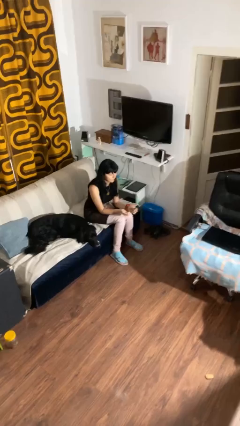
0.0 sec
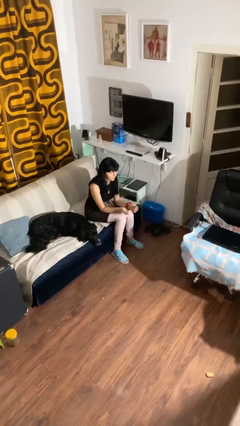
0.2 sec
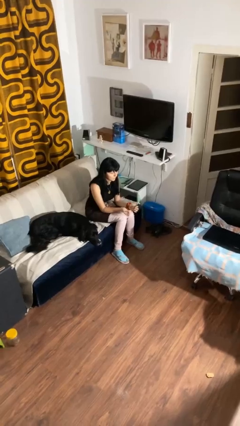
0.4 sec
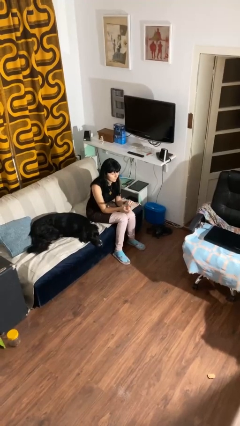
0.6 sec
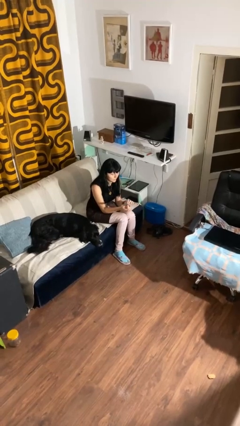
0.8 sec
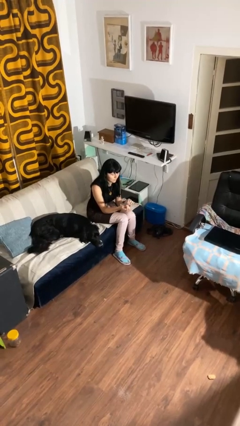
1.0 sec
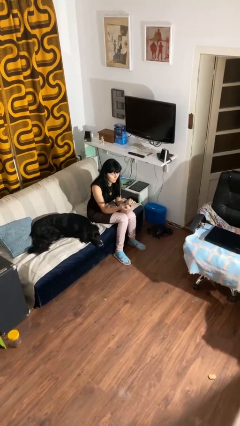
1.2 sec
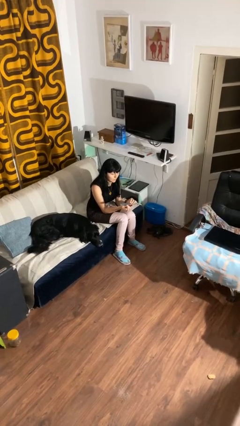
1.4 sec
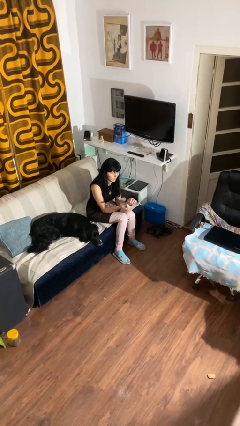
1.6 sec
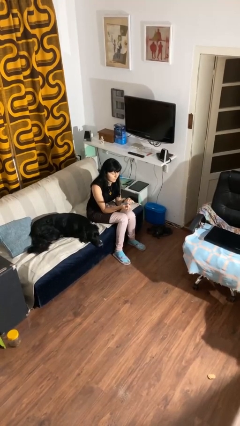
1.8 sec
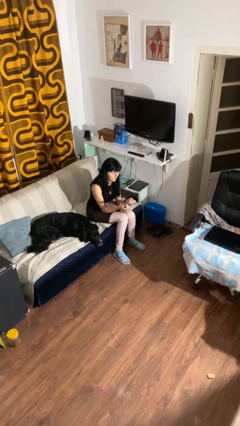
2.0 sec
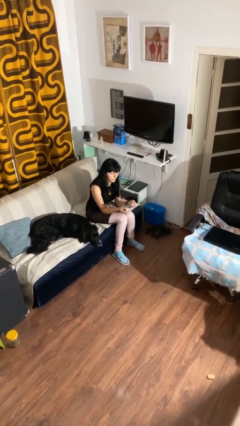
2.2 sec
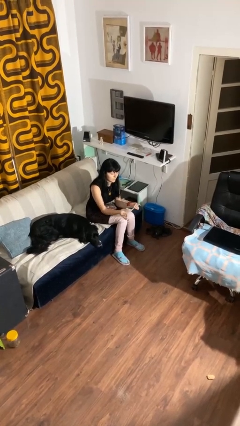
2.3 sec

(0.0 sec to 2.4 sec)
person files fingernails

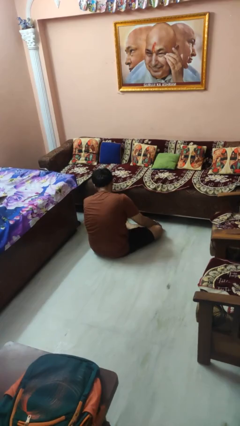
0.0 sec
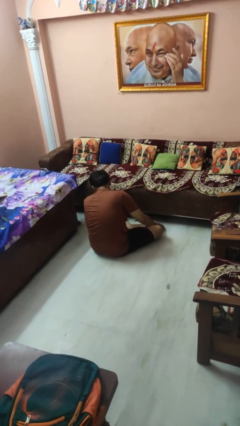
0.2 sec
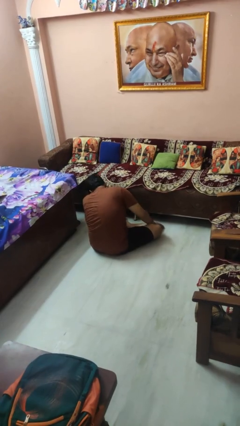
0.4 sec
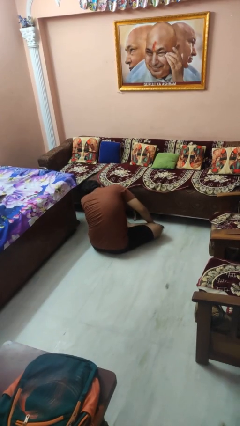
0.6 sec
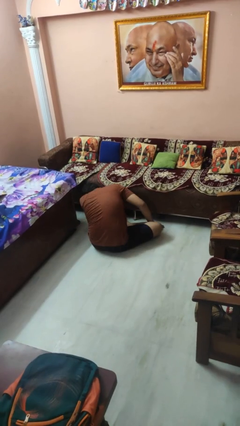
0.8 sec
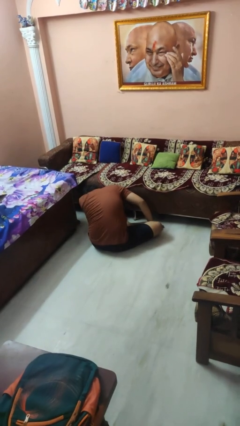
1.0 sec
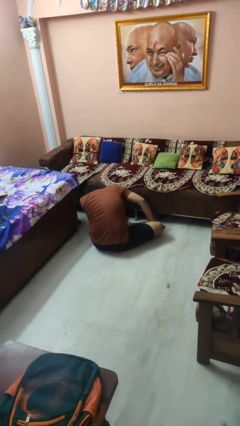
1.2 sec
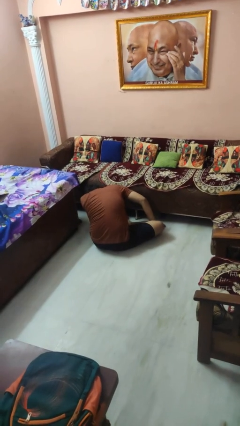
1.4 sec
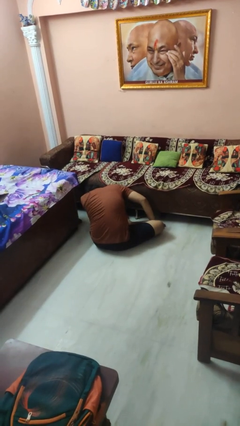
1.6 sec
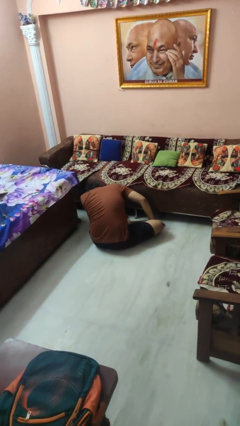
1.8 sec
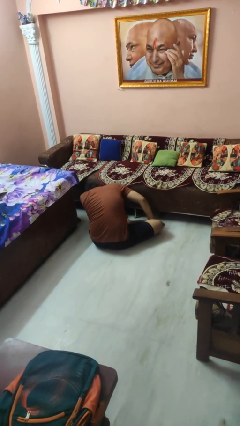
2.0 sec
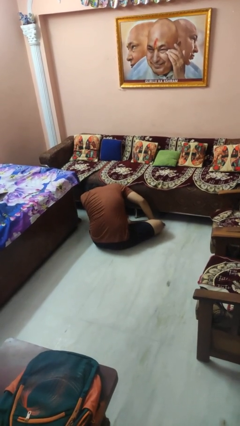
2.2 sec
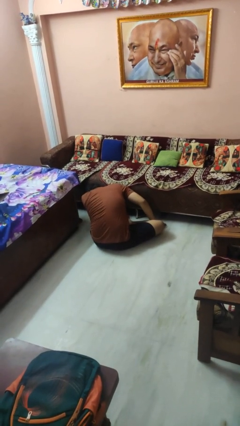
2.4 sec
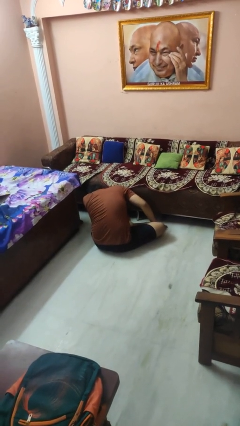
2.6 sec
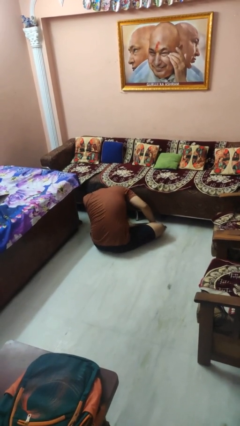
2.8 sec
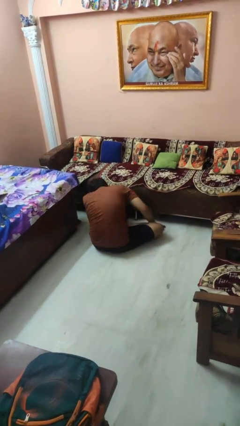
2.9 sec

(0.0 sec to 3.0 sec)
person searches under couch

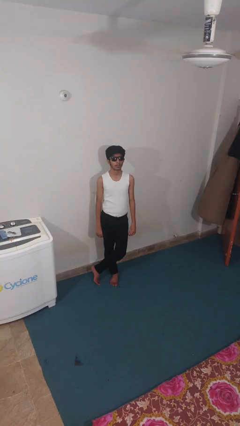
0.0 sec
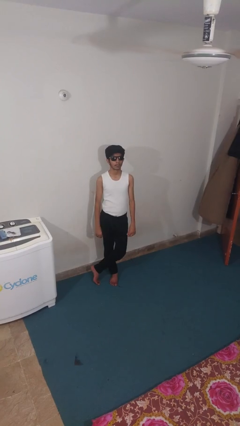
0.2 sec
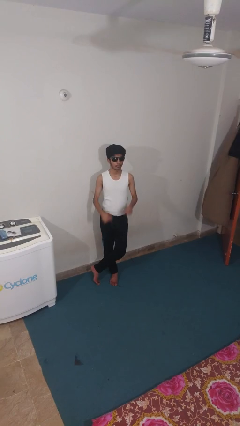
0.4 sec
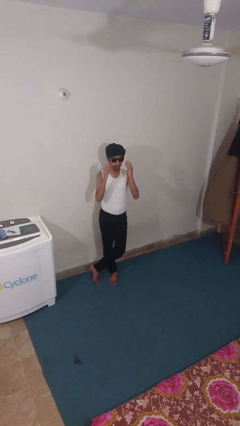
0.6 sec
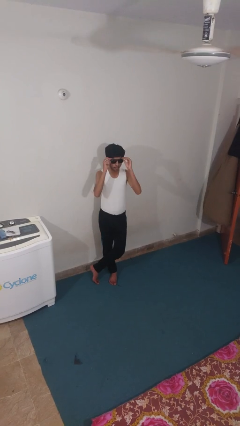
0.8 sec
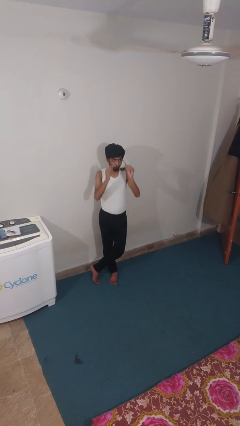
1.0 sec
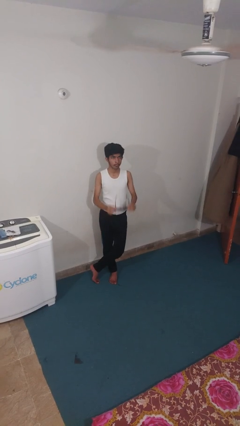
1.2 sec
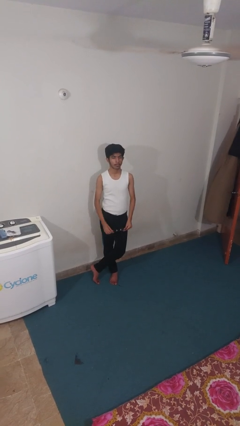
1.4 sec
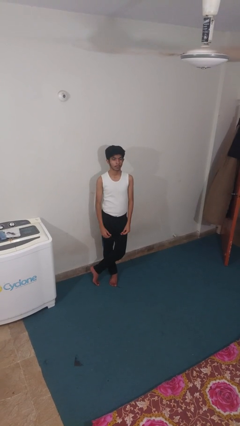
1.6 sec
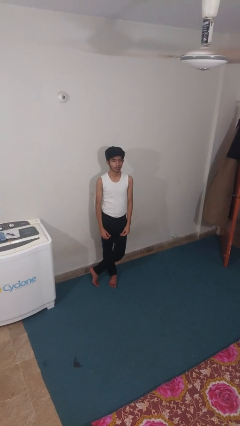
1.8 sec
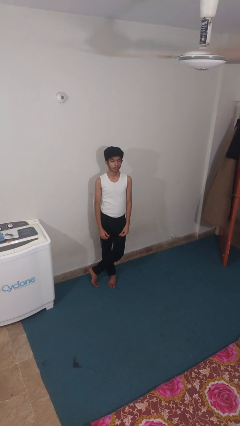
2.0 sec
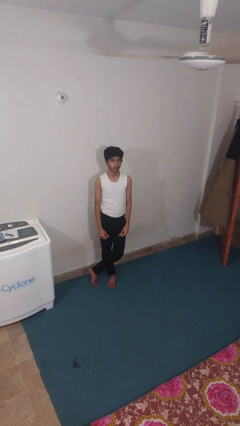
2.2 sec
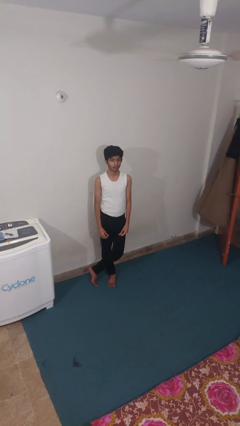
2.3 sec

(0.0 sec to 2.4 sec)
person takes off sunglasses

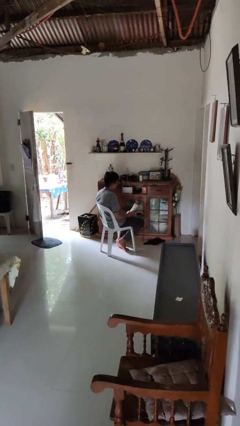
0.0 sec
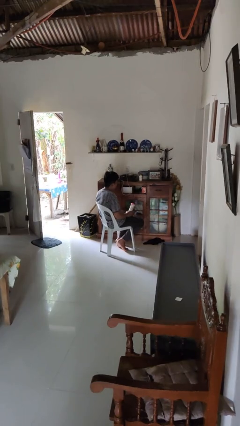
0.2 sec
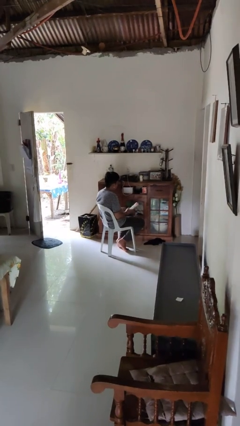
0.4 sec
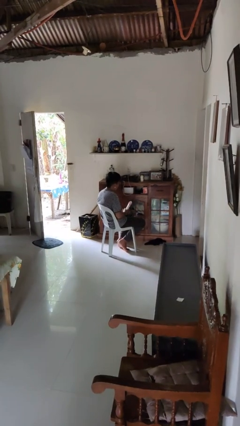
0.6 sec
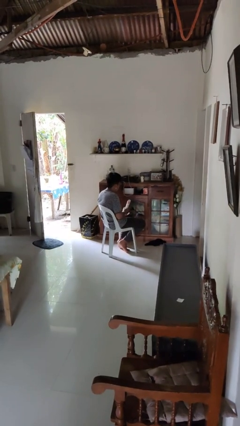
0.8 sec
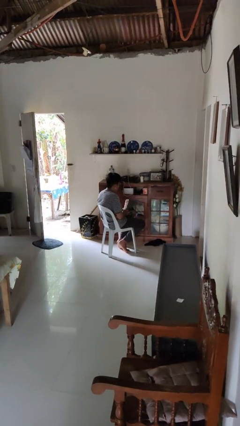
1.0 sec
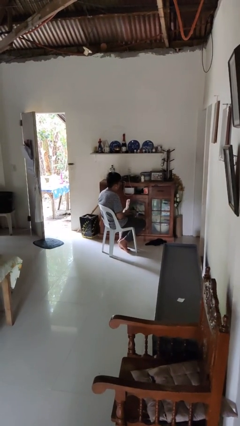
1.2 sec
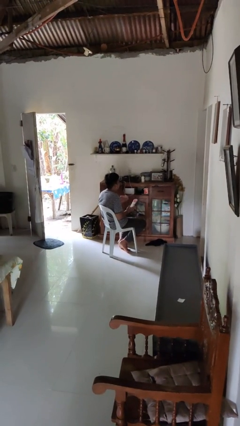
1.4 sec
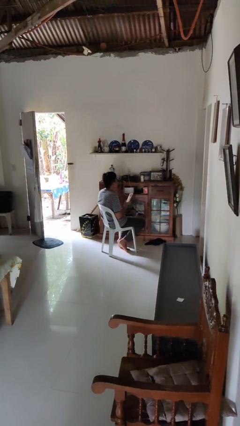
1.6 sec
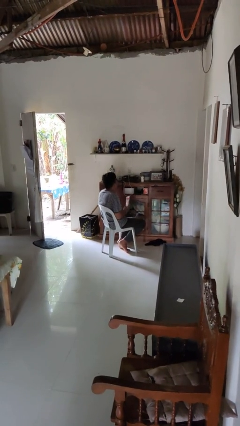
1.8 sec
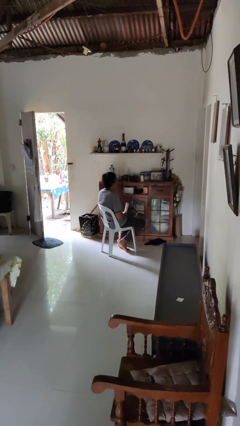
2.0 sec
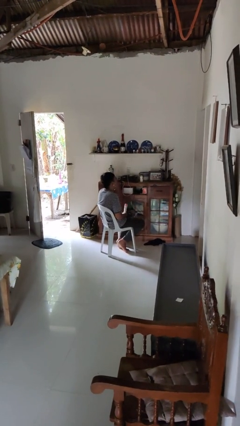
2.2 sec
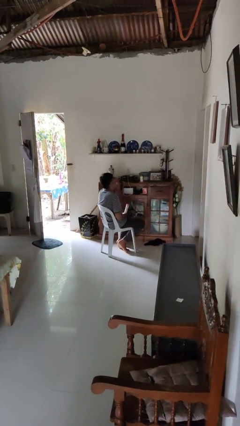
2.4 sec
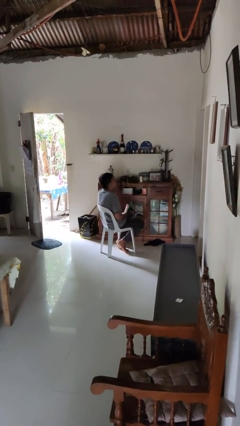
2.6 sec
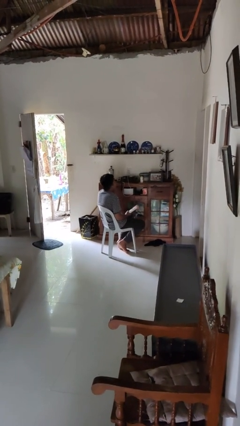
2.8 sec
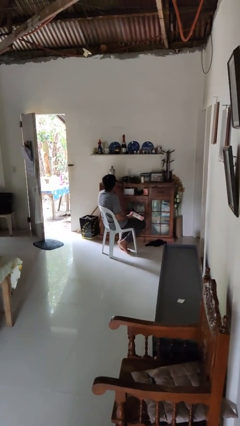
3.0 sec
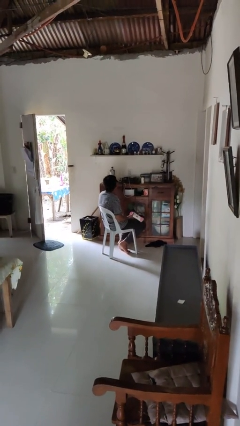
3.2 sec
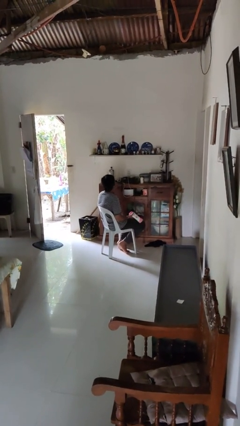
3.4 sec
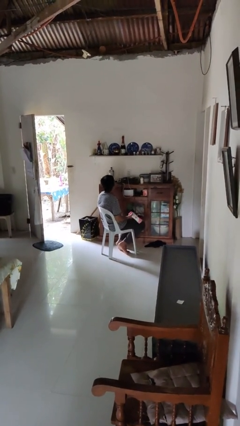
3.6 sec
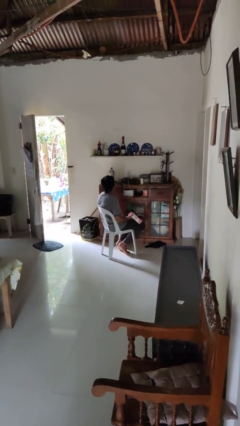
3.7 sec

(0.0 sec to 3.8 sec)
person applies sunscreen

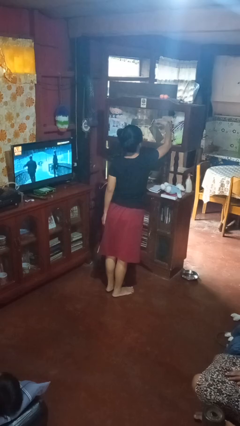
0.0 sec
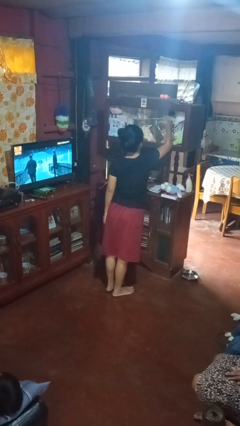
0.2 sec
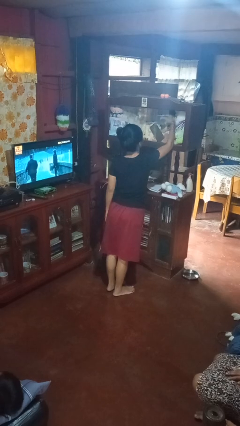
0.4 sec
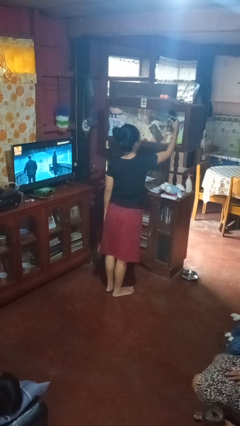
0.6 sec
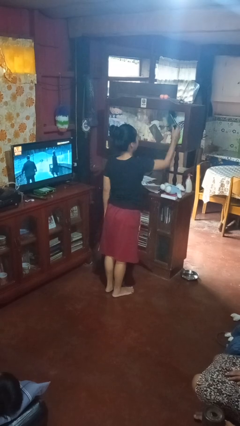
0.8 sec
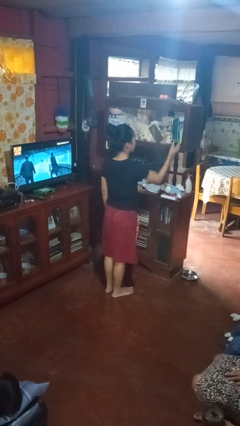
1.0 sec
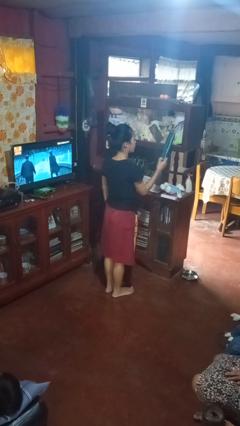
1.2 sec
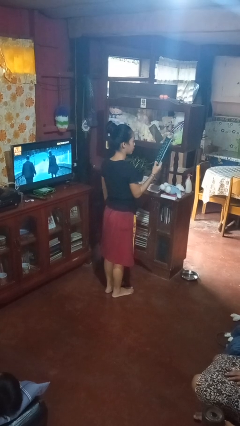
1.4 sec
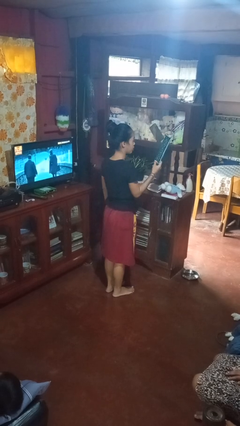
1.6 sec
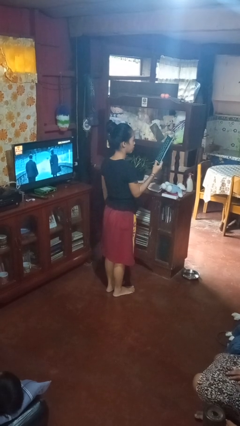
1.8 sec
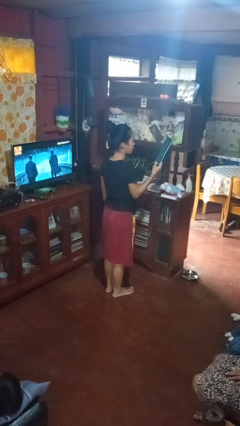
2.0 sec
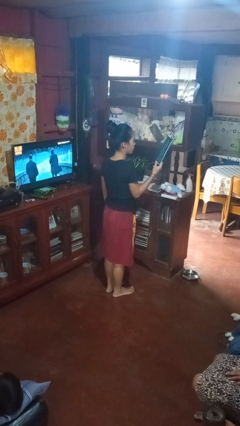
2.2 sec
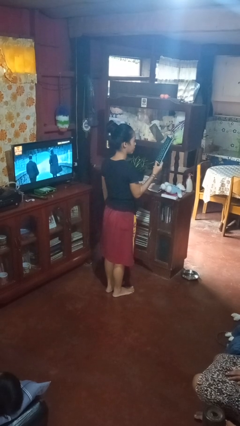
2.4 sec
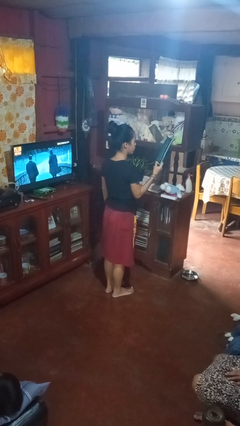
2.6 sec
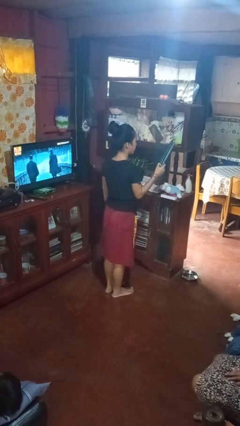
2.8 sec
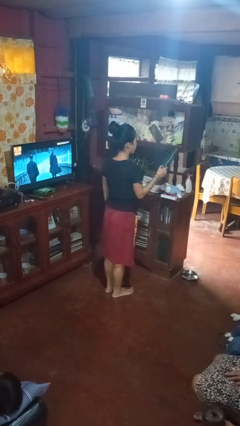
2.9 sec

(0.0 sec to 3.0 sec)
person picks up object from shelf

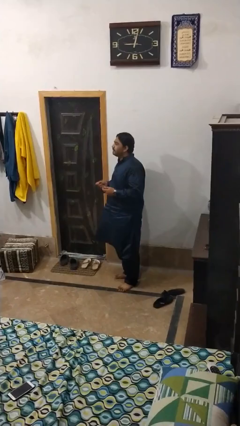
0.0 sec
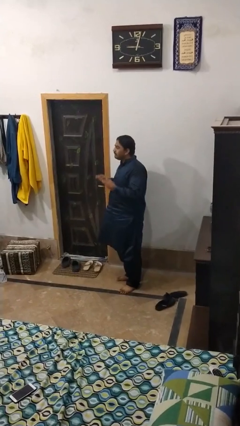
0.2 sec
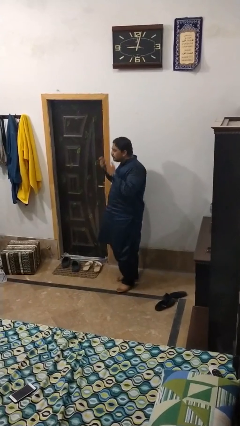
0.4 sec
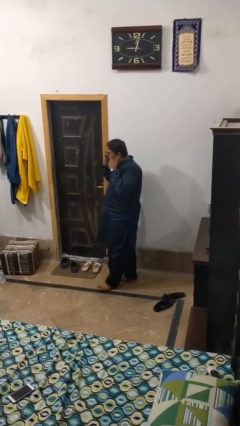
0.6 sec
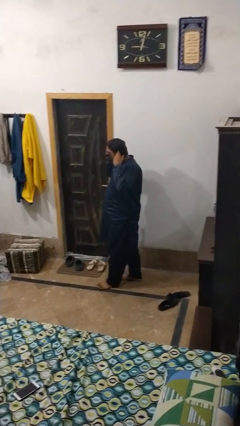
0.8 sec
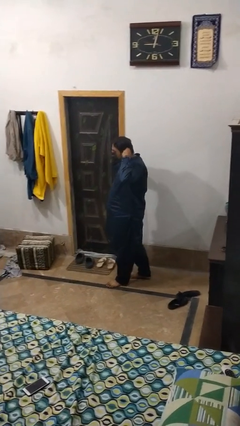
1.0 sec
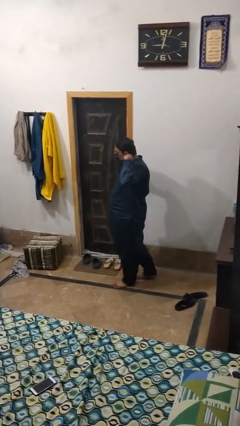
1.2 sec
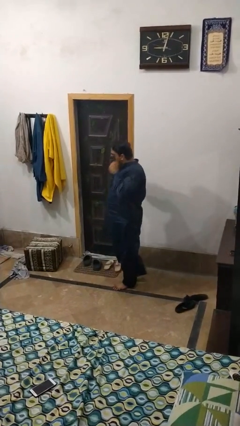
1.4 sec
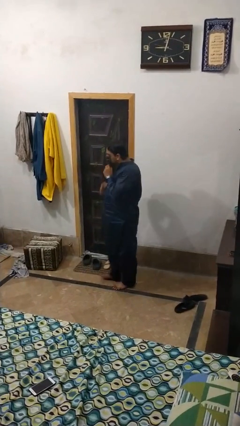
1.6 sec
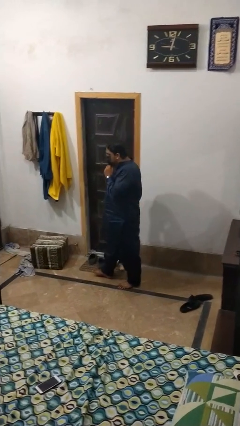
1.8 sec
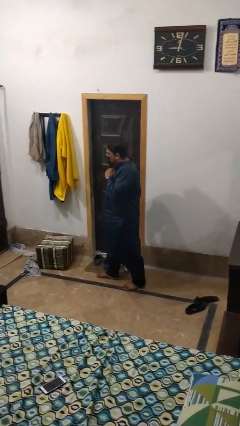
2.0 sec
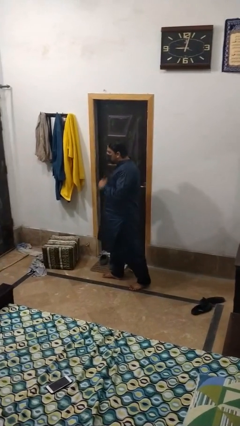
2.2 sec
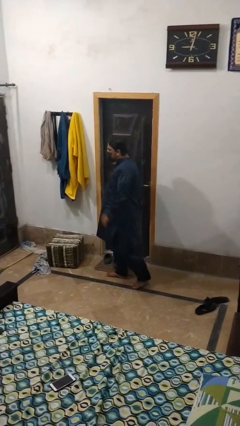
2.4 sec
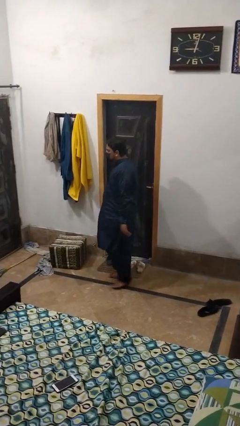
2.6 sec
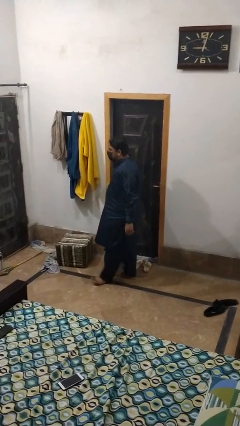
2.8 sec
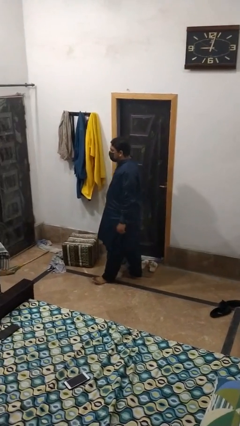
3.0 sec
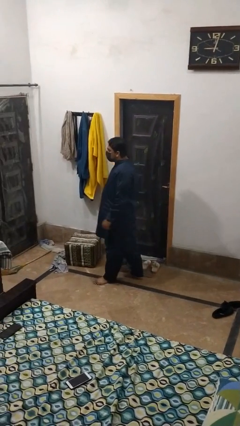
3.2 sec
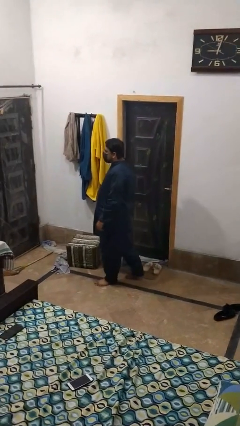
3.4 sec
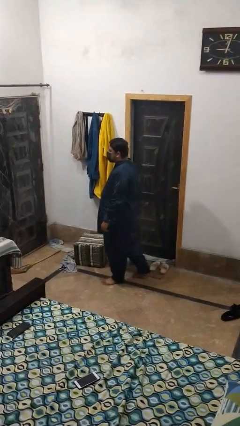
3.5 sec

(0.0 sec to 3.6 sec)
person puts on facemask
